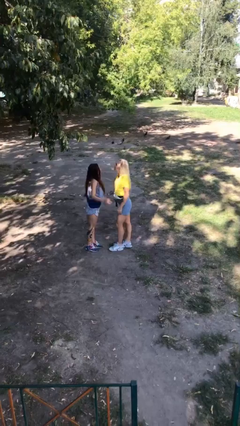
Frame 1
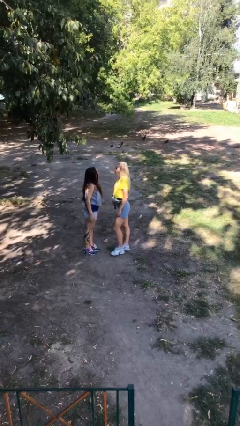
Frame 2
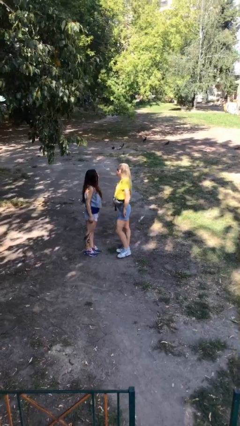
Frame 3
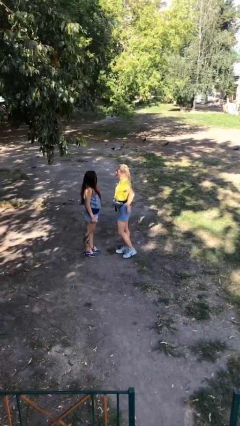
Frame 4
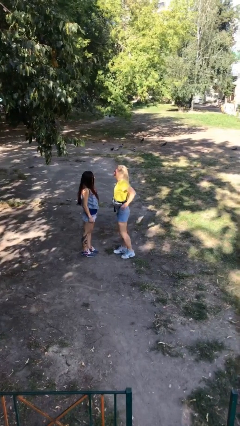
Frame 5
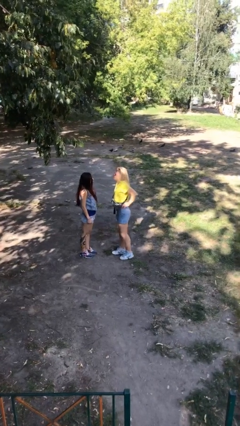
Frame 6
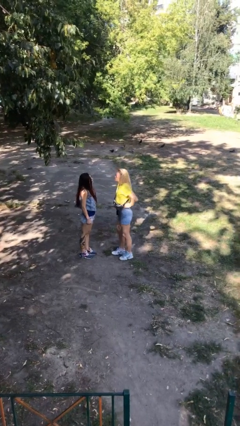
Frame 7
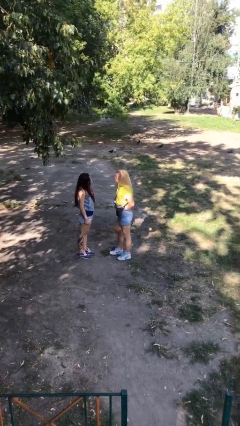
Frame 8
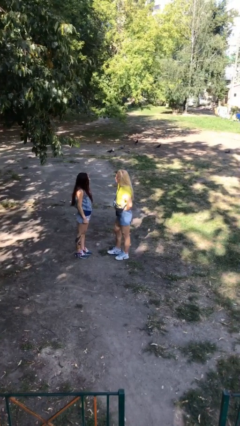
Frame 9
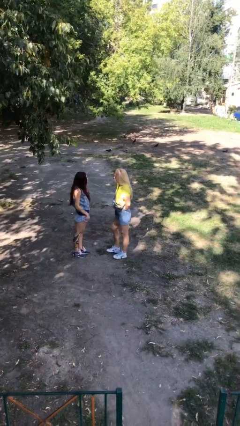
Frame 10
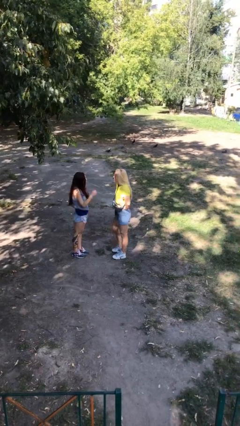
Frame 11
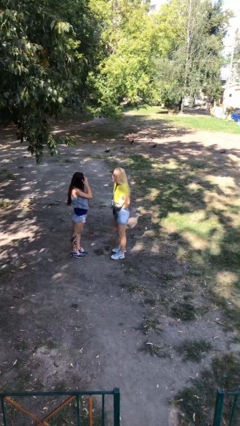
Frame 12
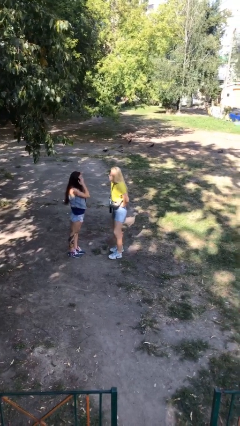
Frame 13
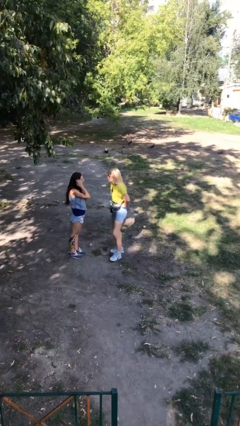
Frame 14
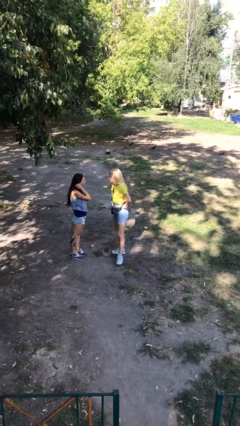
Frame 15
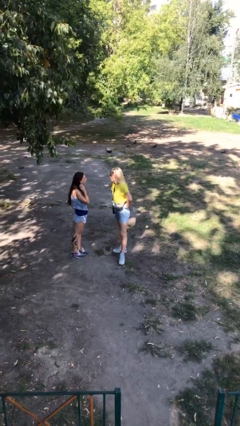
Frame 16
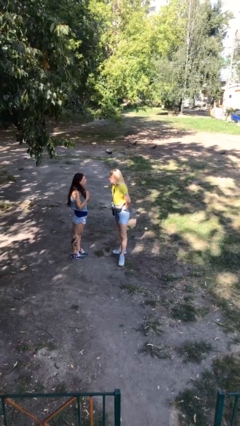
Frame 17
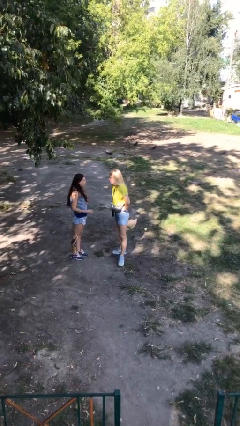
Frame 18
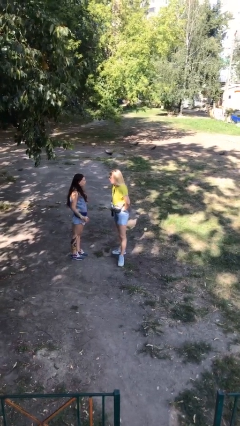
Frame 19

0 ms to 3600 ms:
person talks to person

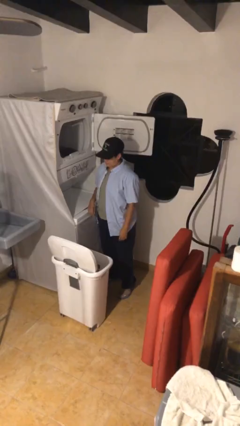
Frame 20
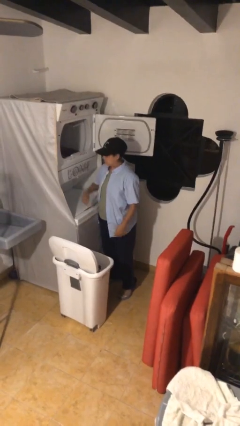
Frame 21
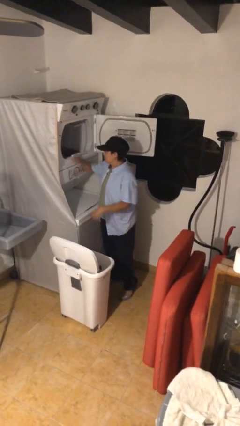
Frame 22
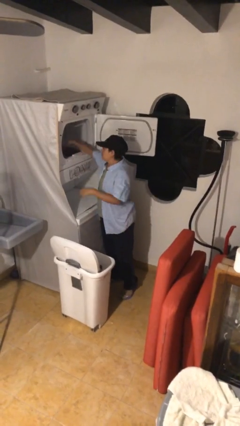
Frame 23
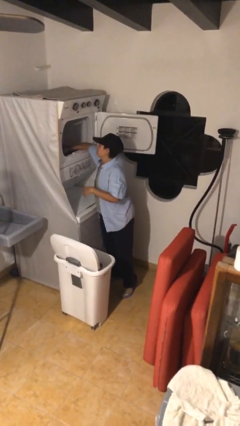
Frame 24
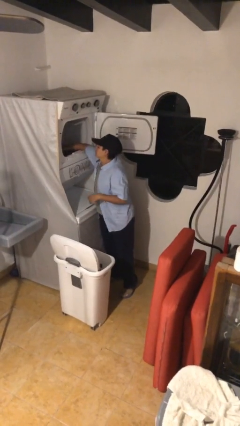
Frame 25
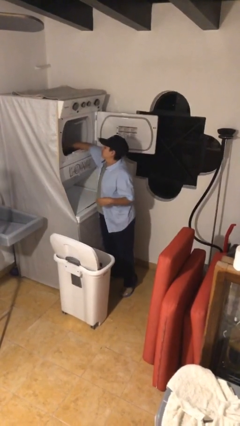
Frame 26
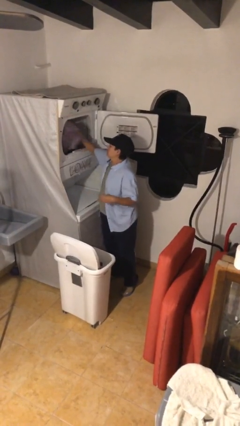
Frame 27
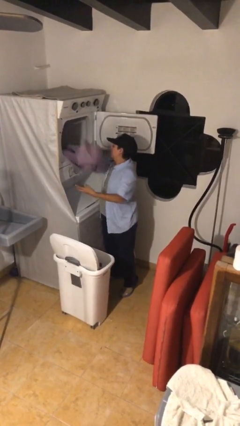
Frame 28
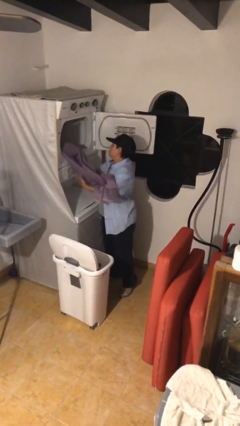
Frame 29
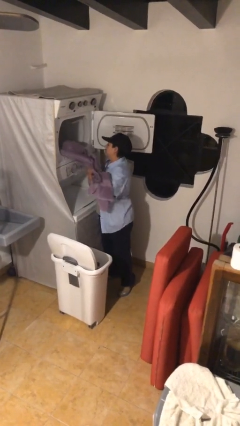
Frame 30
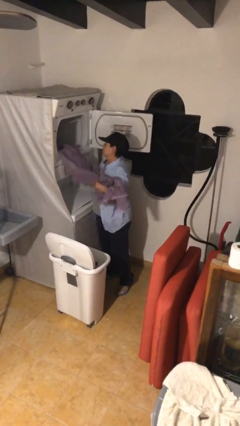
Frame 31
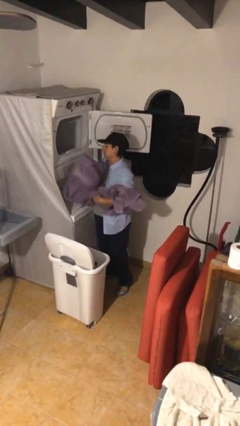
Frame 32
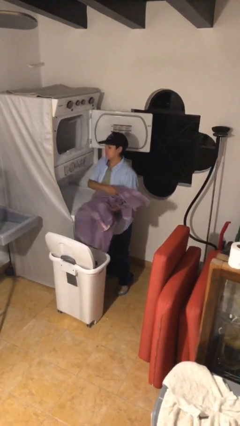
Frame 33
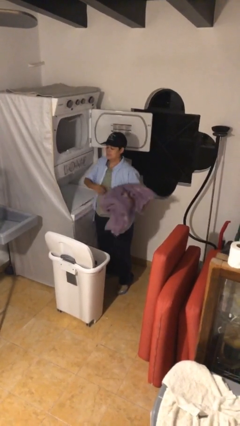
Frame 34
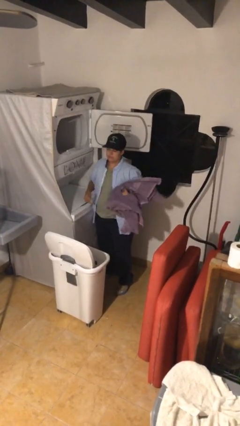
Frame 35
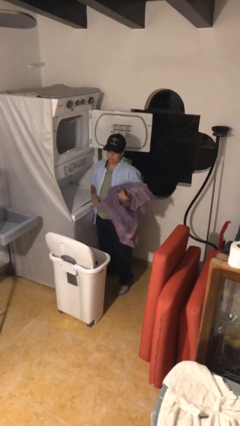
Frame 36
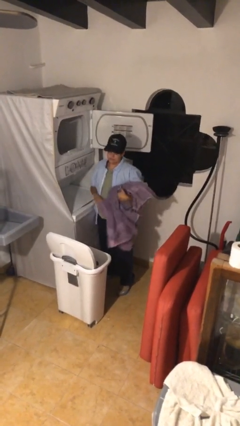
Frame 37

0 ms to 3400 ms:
person unloads dryer

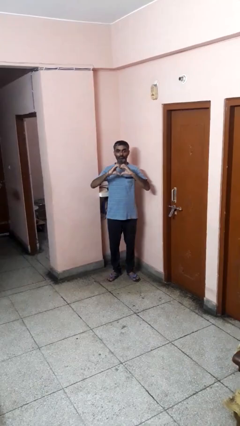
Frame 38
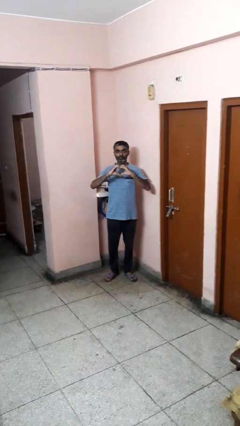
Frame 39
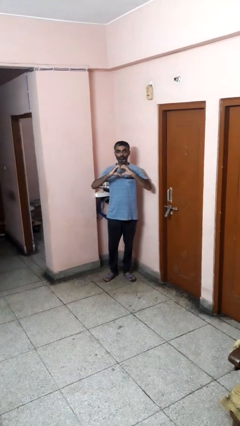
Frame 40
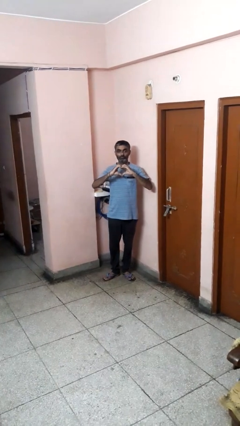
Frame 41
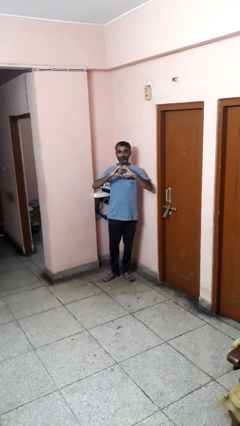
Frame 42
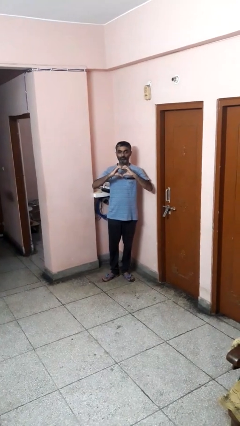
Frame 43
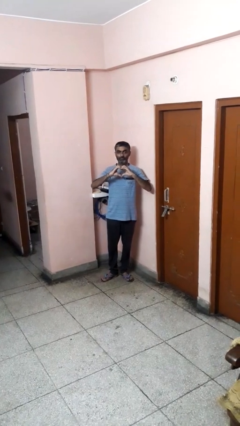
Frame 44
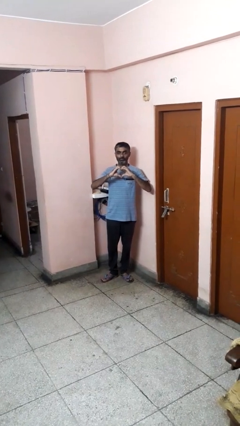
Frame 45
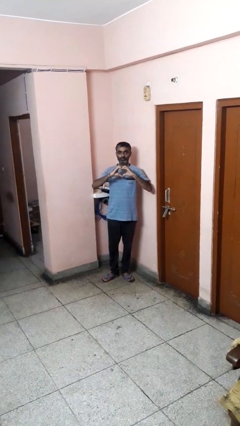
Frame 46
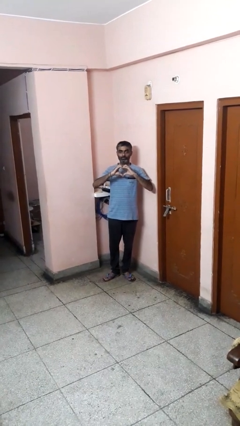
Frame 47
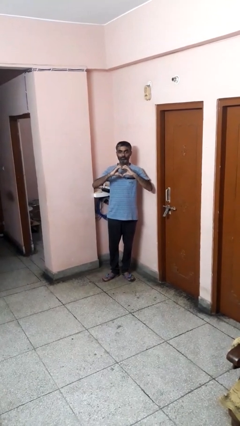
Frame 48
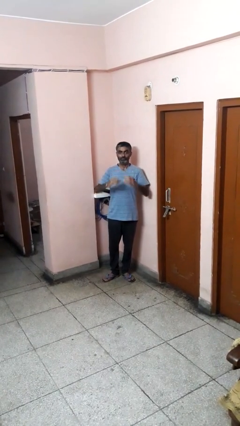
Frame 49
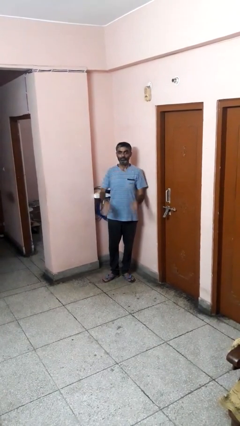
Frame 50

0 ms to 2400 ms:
person gestures heart

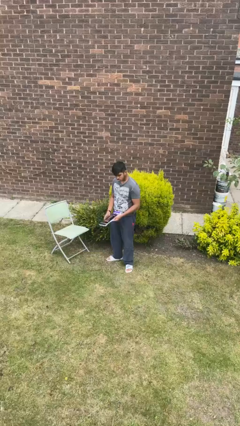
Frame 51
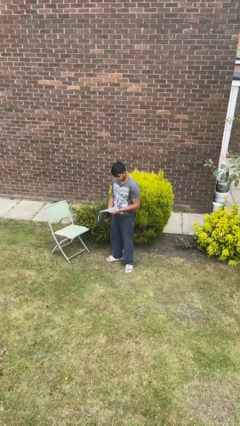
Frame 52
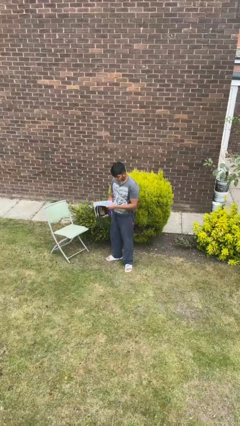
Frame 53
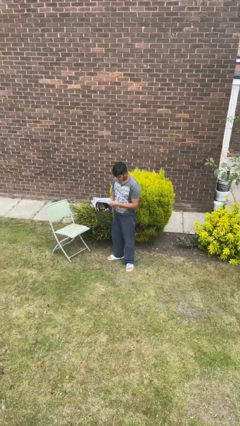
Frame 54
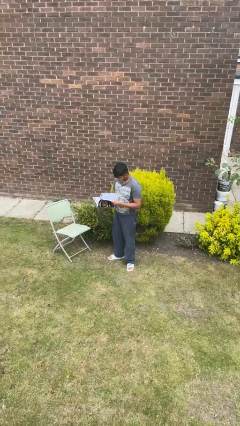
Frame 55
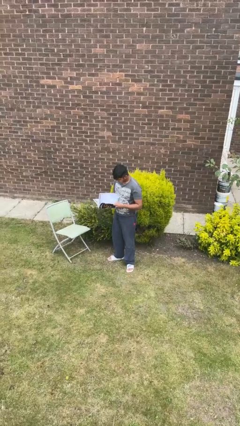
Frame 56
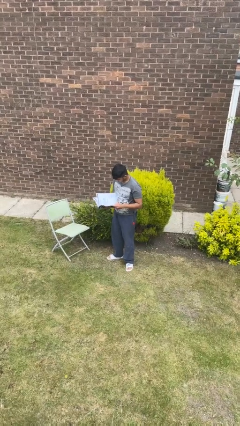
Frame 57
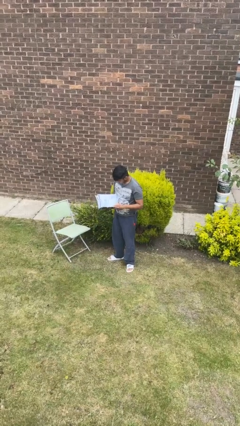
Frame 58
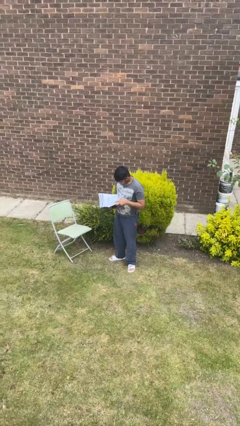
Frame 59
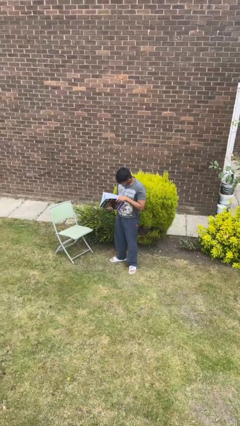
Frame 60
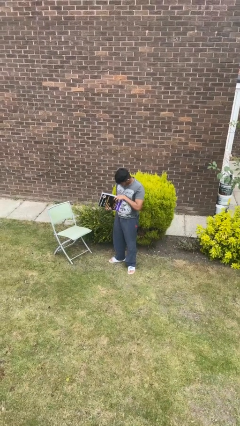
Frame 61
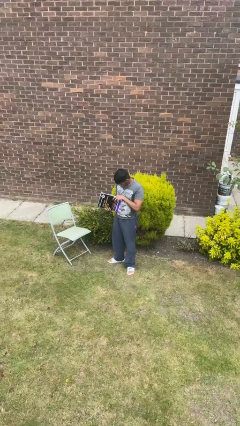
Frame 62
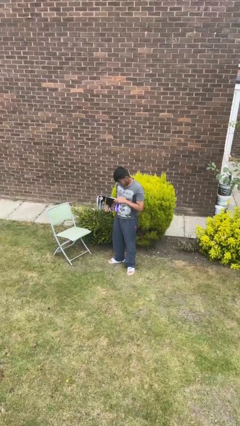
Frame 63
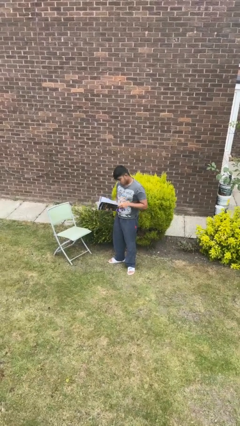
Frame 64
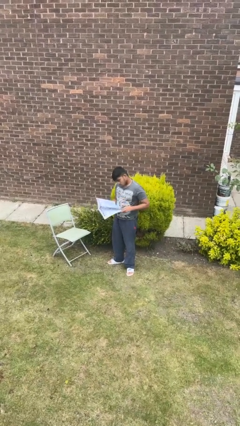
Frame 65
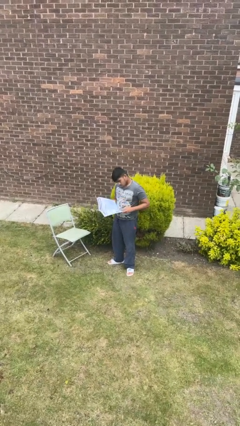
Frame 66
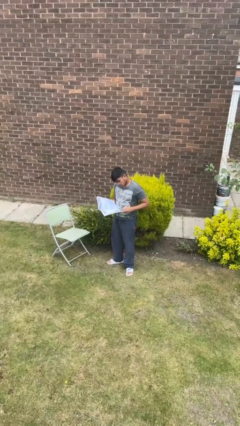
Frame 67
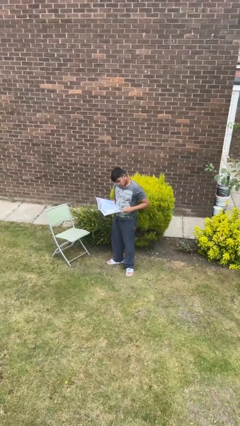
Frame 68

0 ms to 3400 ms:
person reads book

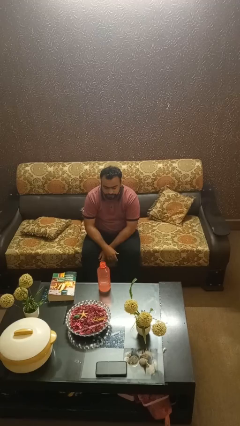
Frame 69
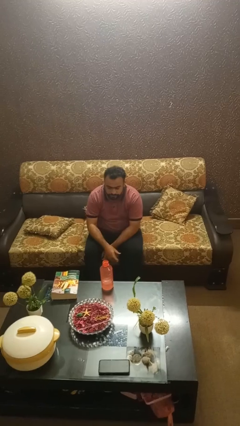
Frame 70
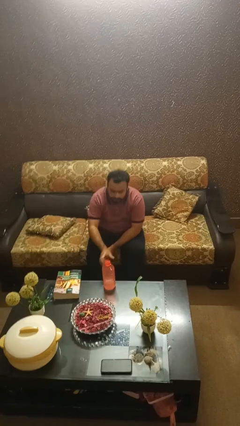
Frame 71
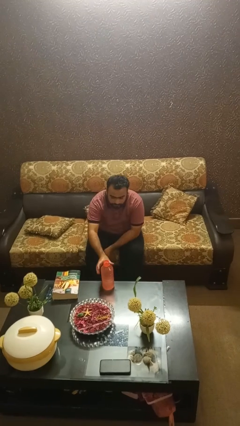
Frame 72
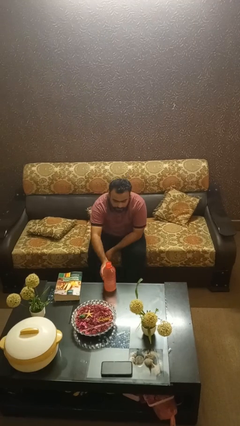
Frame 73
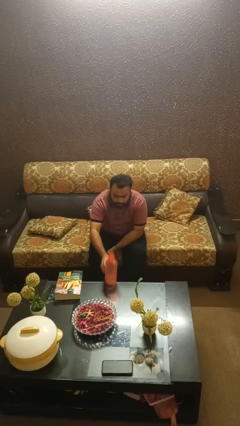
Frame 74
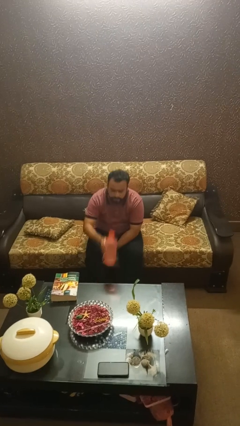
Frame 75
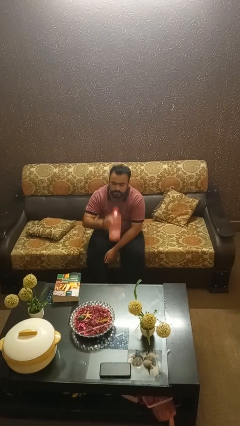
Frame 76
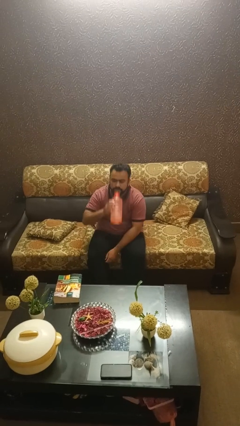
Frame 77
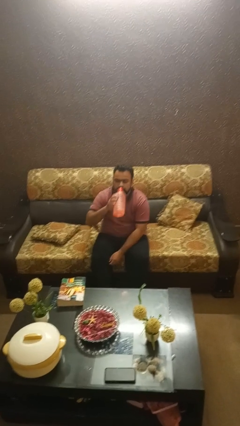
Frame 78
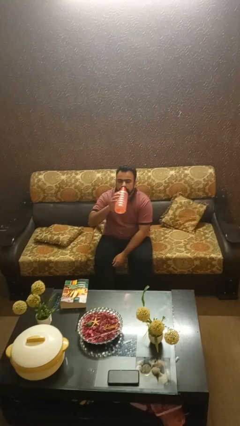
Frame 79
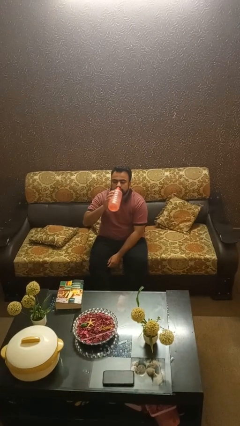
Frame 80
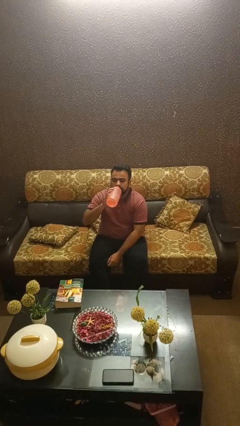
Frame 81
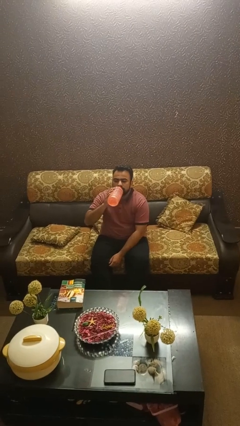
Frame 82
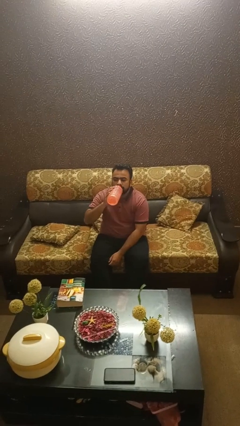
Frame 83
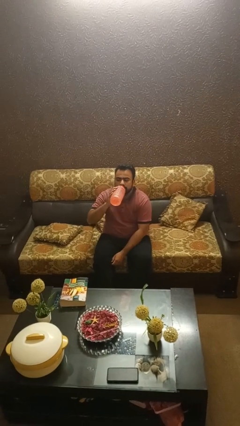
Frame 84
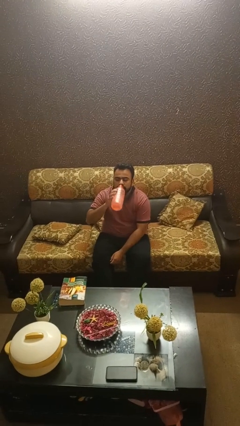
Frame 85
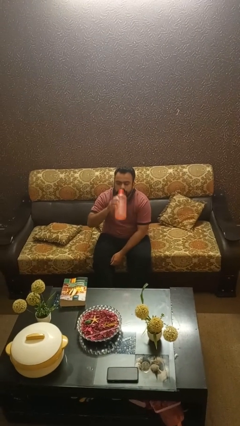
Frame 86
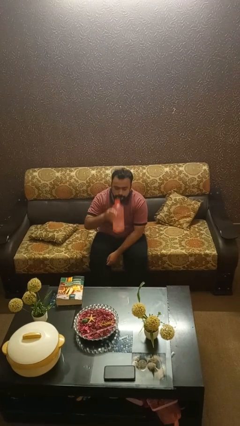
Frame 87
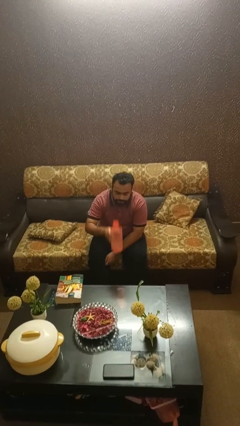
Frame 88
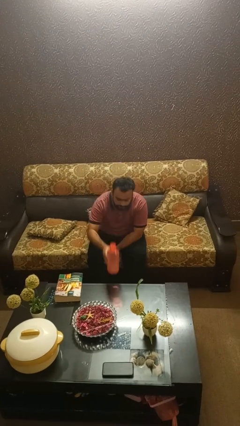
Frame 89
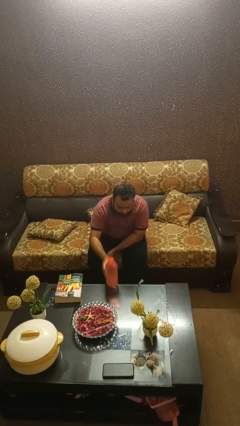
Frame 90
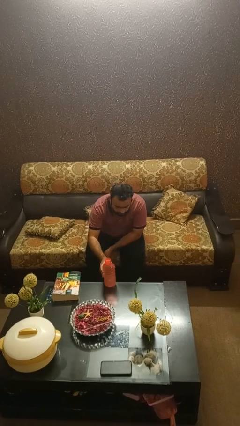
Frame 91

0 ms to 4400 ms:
person drinks from bottle

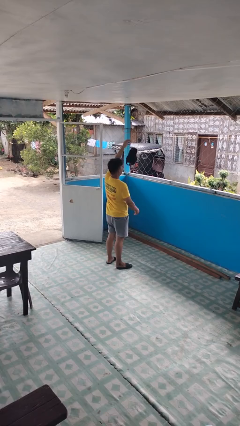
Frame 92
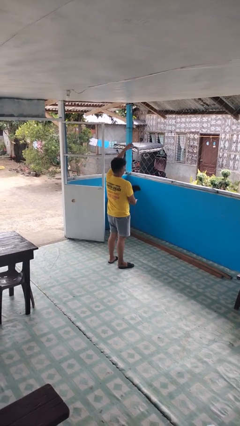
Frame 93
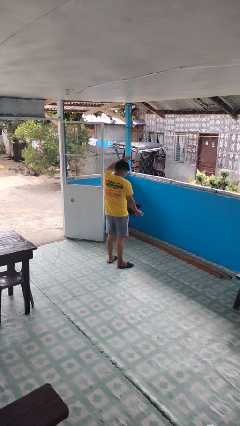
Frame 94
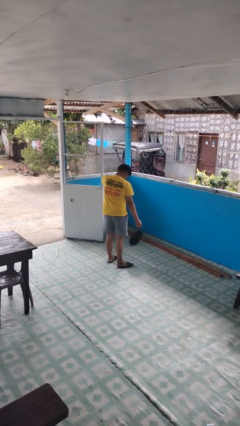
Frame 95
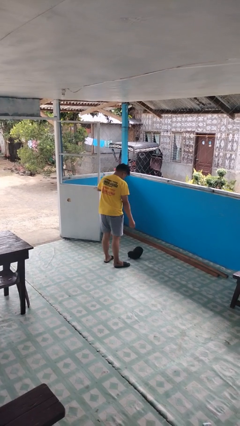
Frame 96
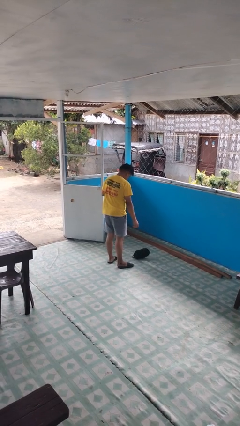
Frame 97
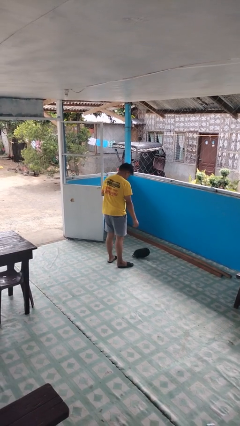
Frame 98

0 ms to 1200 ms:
person drops object
